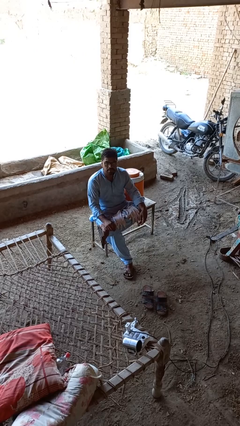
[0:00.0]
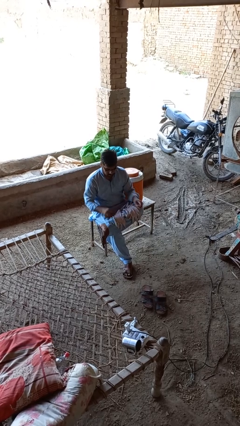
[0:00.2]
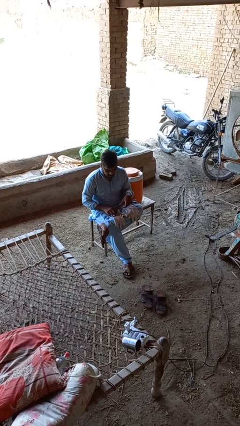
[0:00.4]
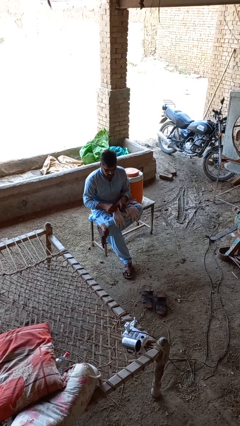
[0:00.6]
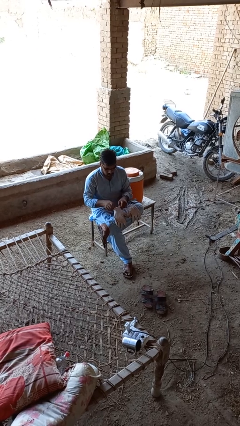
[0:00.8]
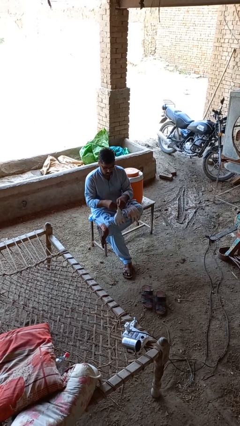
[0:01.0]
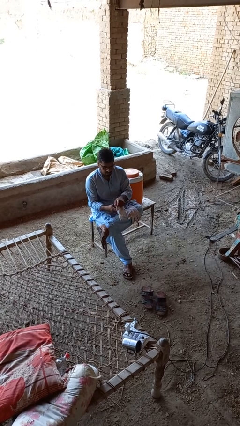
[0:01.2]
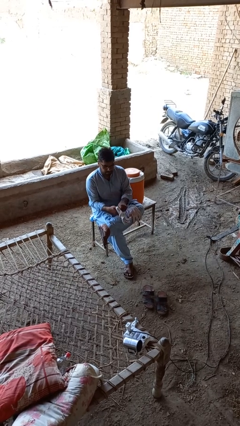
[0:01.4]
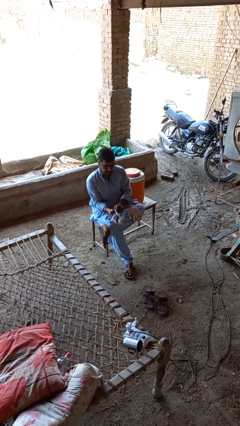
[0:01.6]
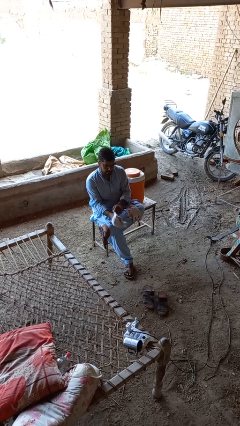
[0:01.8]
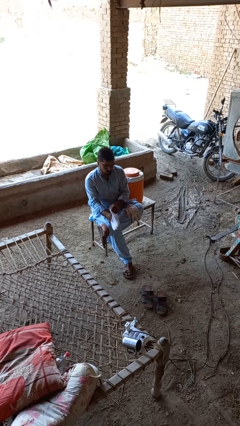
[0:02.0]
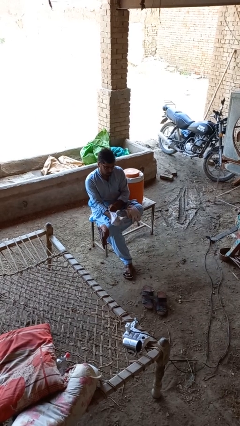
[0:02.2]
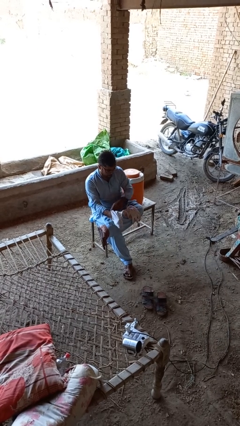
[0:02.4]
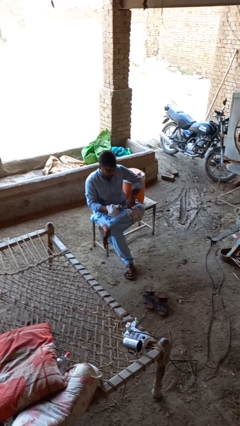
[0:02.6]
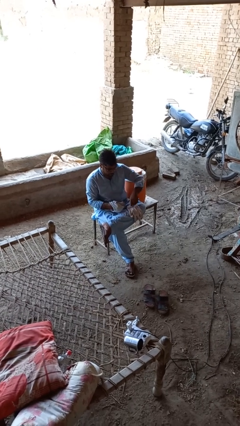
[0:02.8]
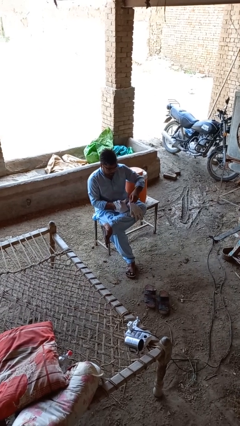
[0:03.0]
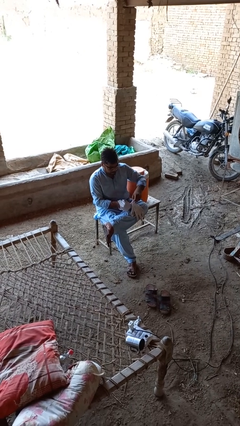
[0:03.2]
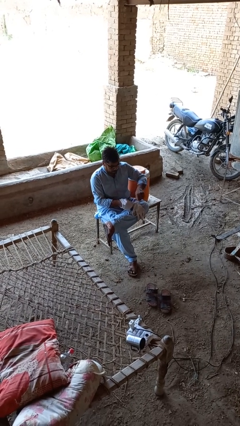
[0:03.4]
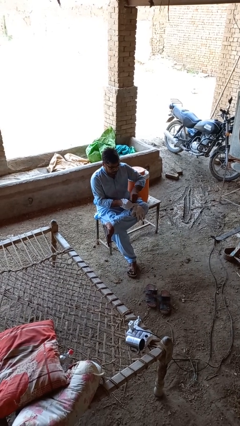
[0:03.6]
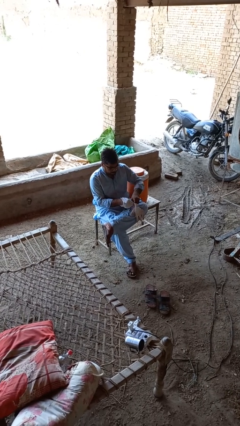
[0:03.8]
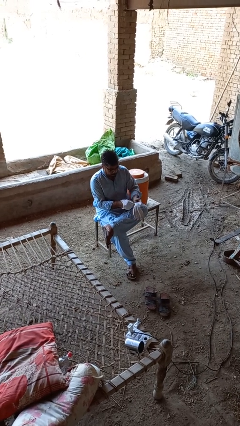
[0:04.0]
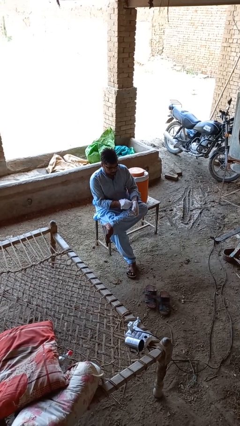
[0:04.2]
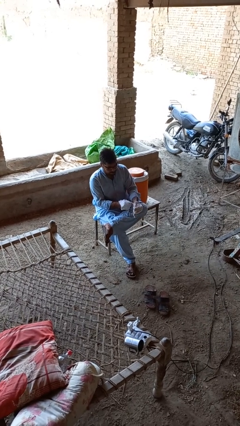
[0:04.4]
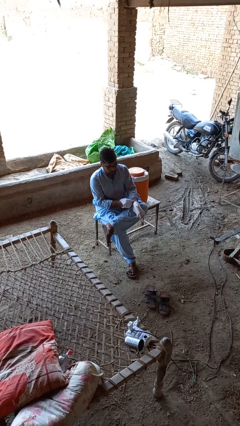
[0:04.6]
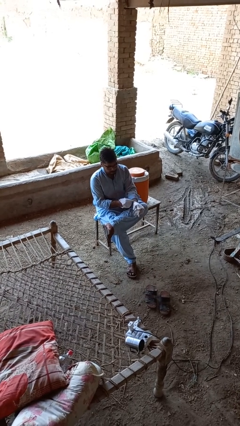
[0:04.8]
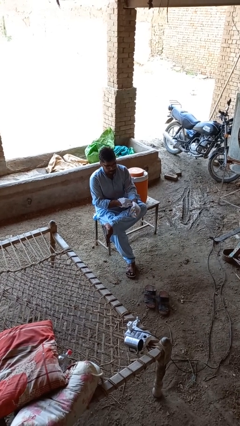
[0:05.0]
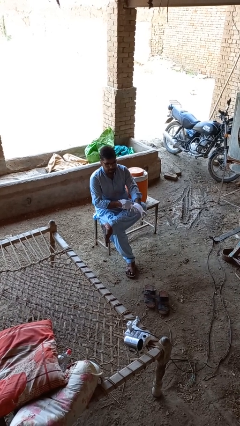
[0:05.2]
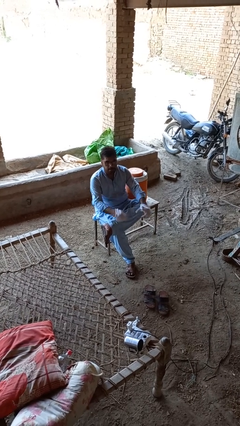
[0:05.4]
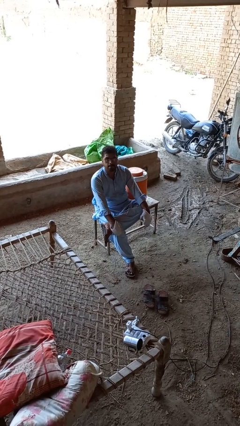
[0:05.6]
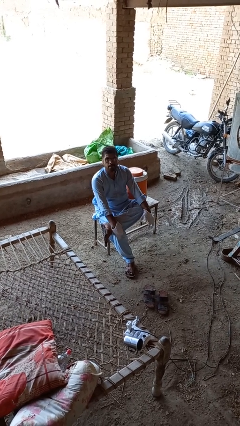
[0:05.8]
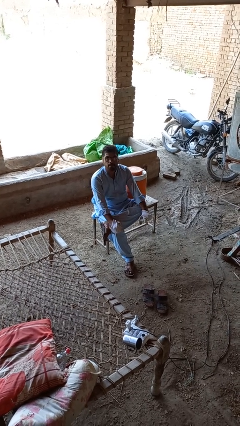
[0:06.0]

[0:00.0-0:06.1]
person puts on gloves

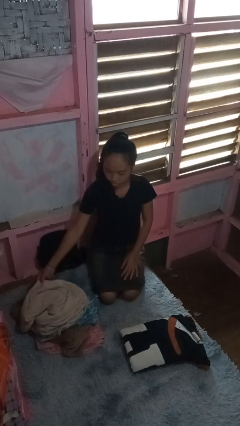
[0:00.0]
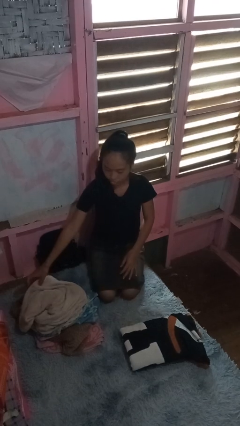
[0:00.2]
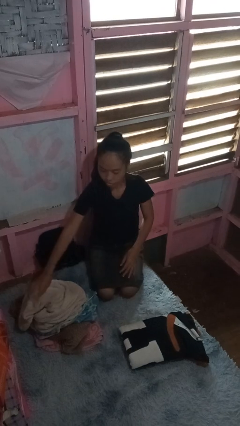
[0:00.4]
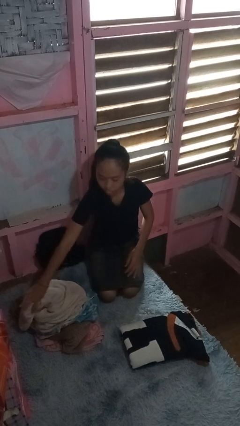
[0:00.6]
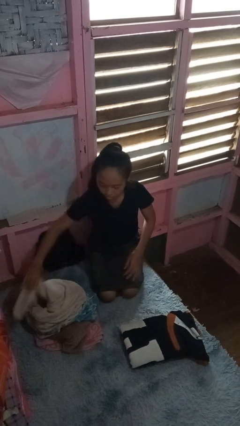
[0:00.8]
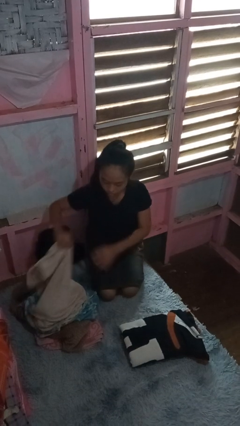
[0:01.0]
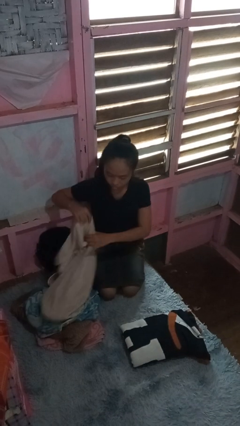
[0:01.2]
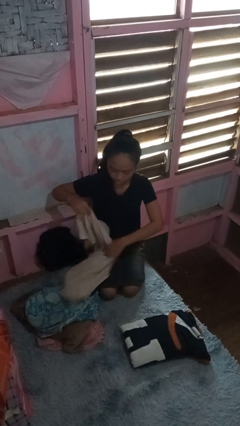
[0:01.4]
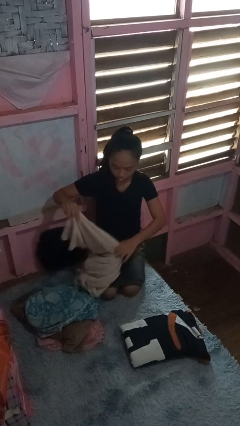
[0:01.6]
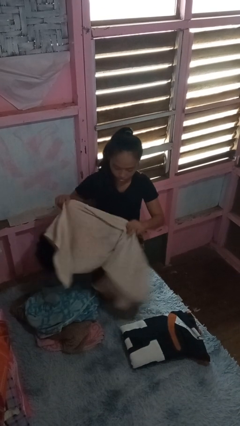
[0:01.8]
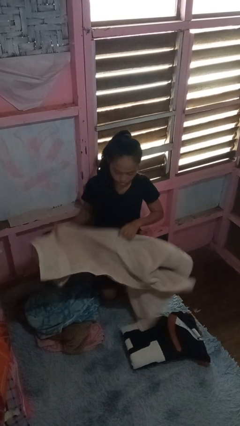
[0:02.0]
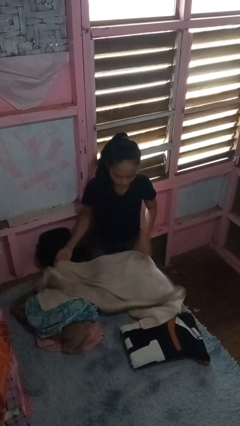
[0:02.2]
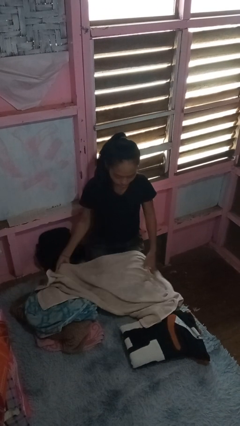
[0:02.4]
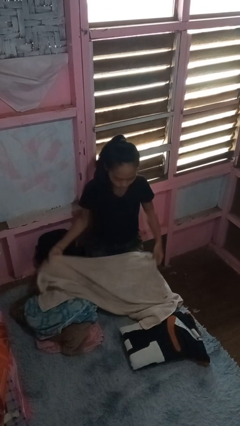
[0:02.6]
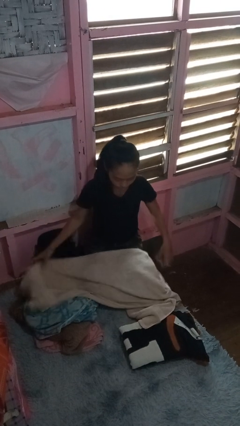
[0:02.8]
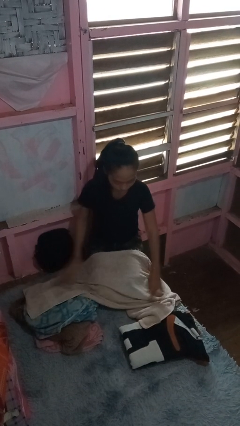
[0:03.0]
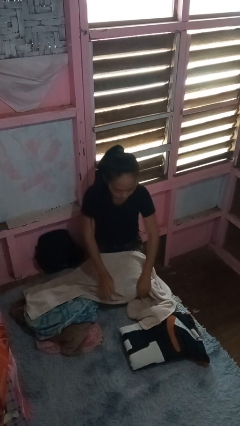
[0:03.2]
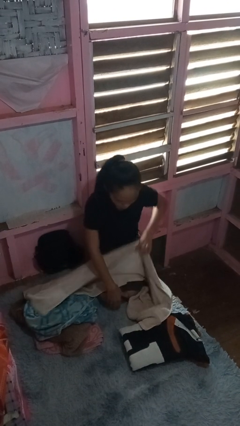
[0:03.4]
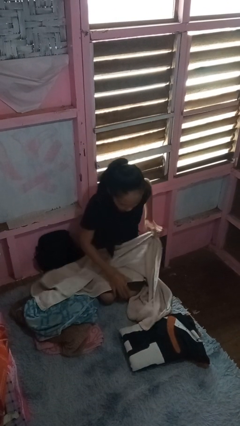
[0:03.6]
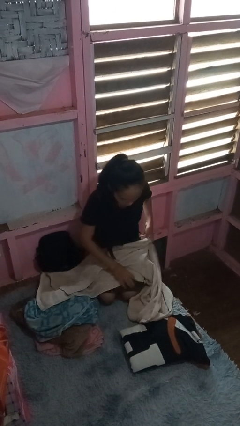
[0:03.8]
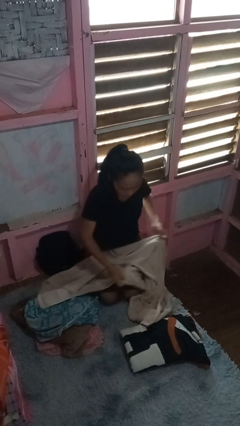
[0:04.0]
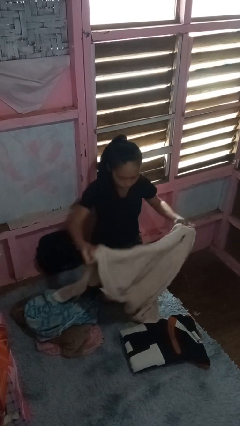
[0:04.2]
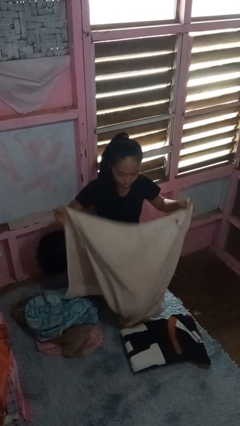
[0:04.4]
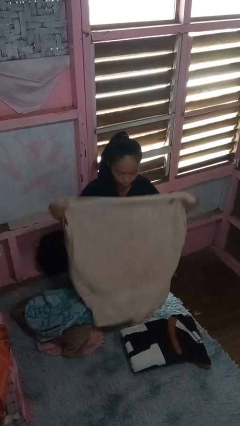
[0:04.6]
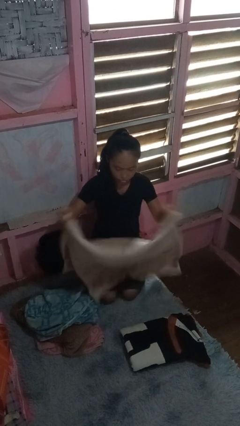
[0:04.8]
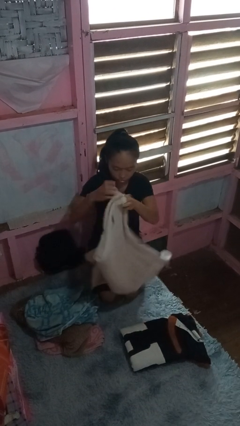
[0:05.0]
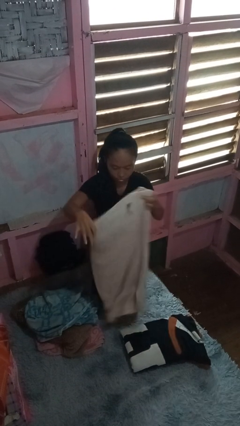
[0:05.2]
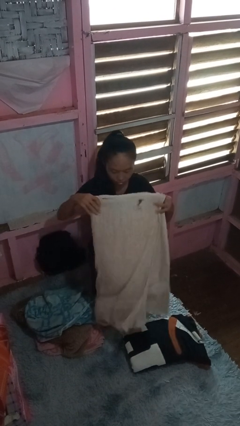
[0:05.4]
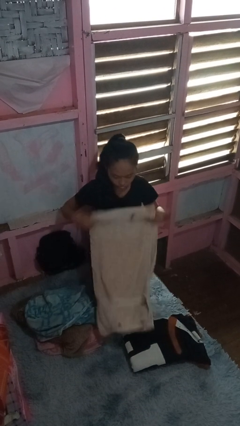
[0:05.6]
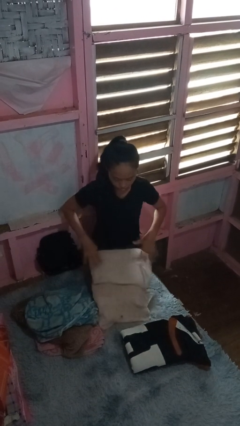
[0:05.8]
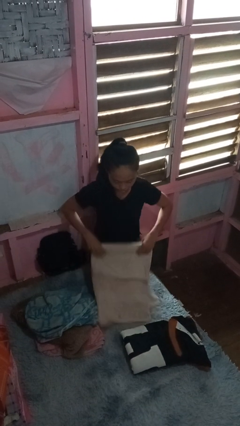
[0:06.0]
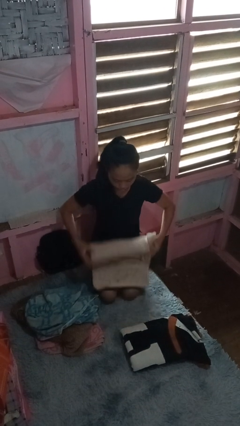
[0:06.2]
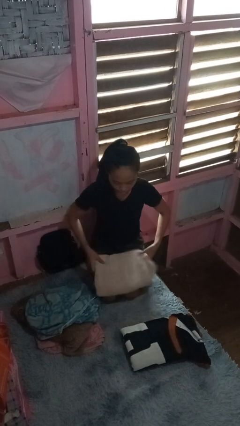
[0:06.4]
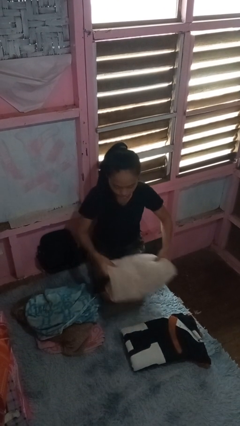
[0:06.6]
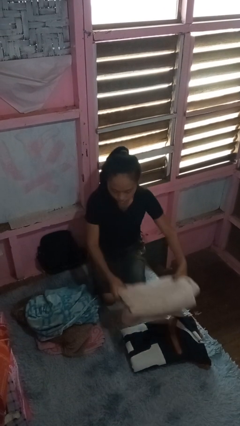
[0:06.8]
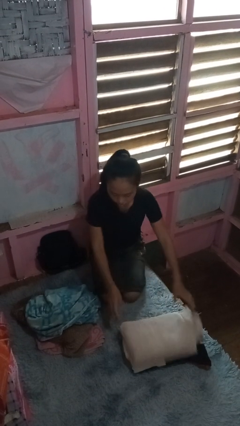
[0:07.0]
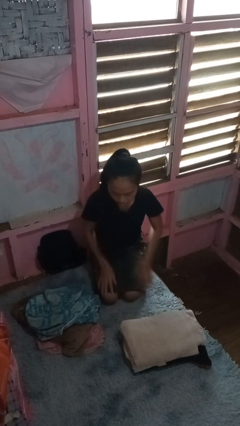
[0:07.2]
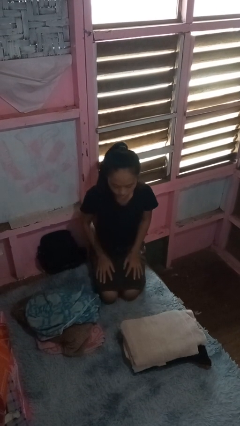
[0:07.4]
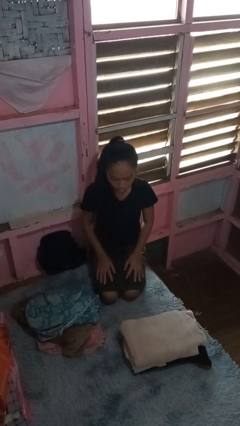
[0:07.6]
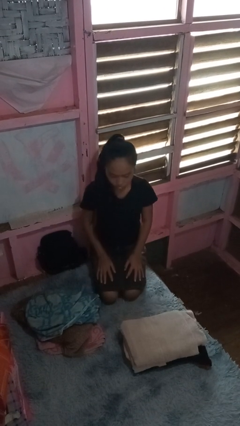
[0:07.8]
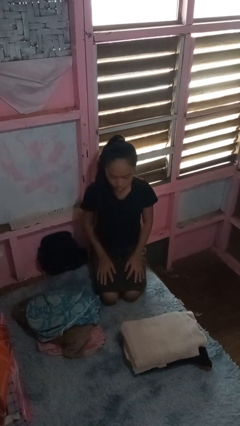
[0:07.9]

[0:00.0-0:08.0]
person folds towel

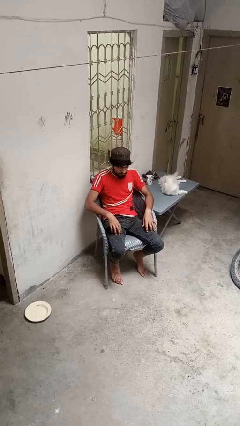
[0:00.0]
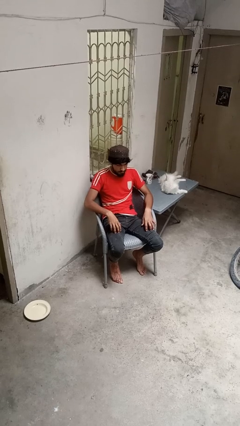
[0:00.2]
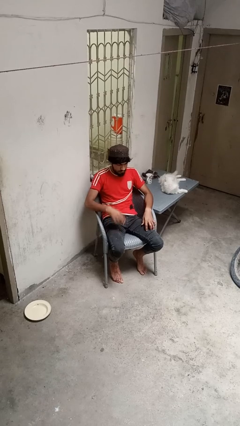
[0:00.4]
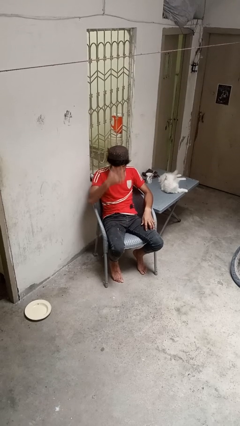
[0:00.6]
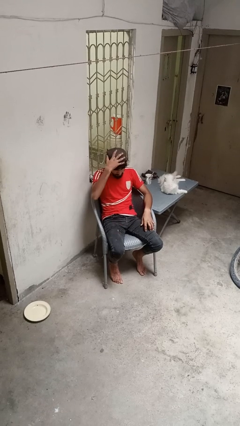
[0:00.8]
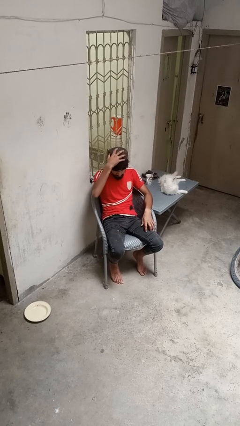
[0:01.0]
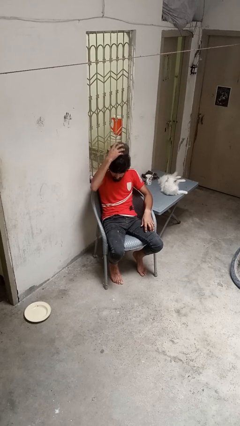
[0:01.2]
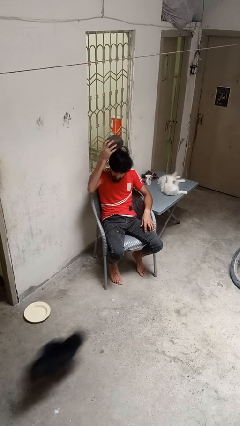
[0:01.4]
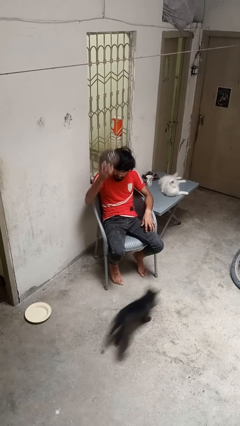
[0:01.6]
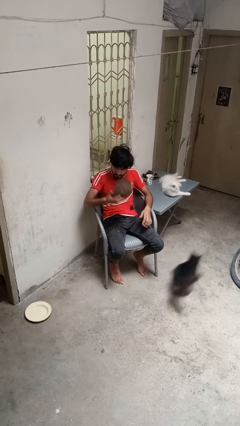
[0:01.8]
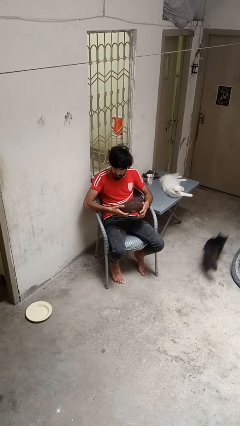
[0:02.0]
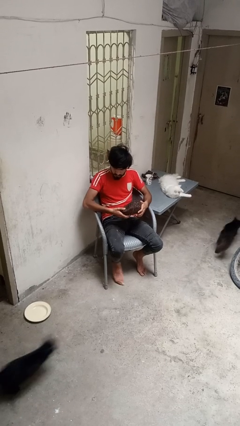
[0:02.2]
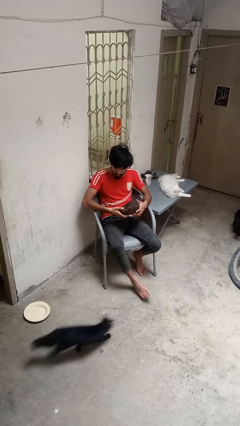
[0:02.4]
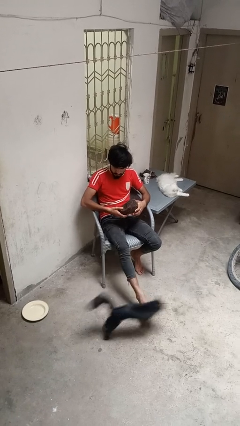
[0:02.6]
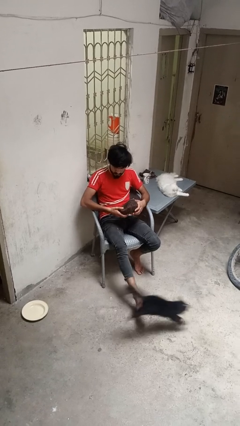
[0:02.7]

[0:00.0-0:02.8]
person takes off hat

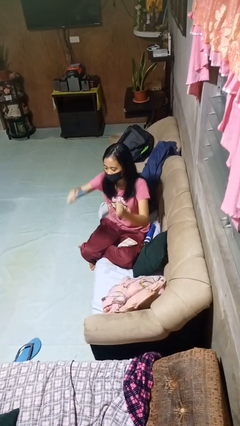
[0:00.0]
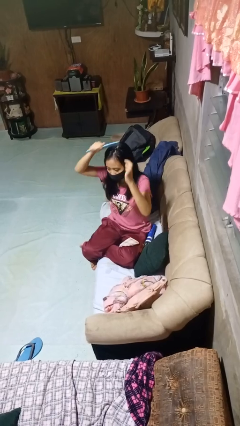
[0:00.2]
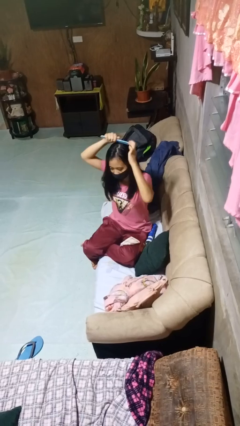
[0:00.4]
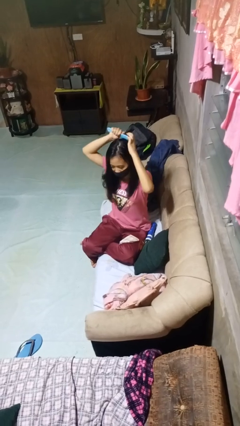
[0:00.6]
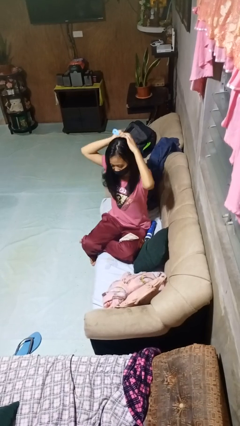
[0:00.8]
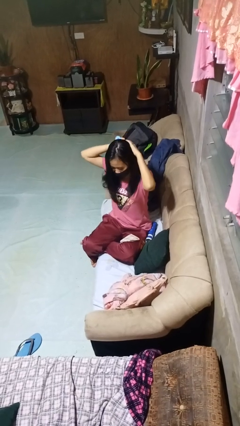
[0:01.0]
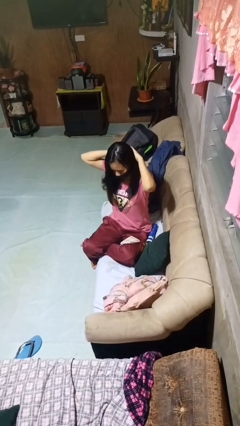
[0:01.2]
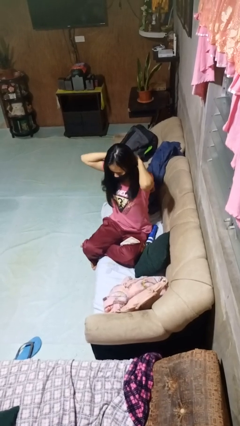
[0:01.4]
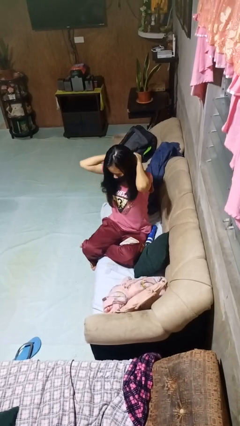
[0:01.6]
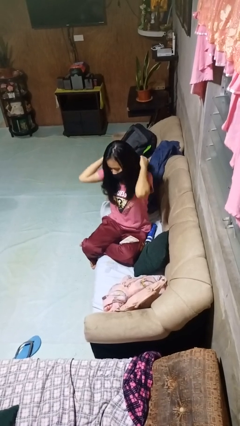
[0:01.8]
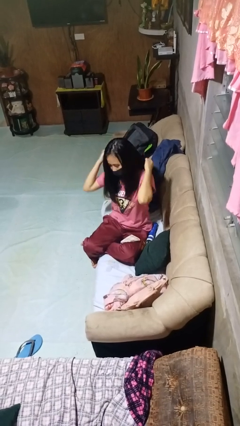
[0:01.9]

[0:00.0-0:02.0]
person brushes hair
